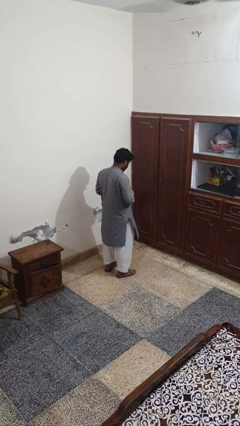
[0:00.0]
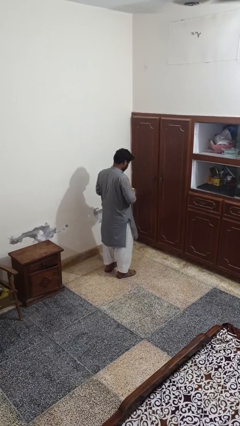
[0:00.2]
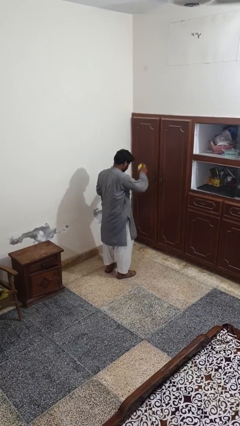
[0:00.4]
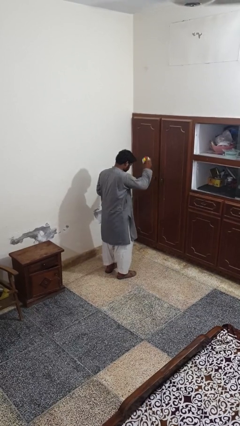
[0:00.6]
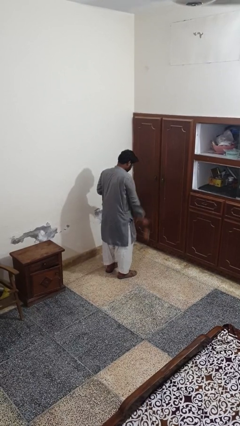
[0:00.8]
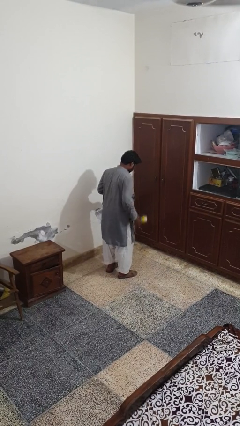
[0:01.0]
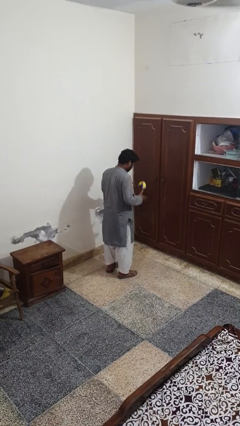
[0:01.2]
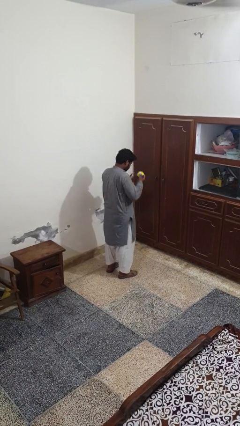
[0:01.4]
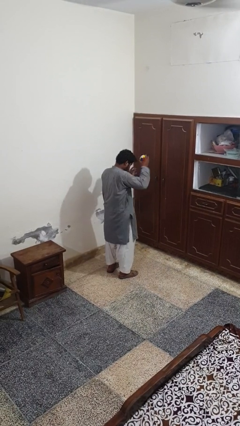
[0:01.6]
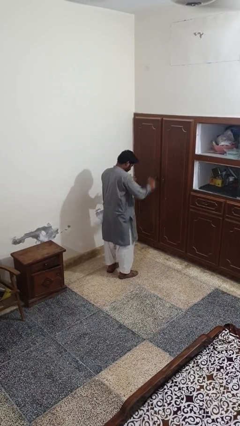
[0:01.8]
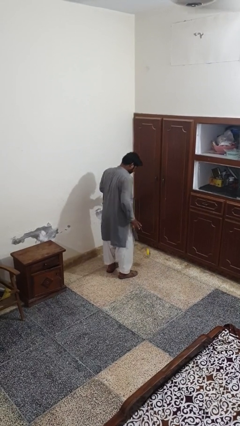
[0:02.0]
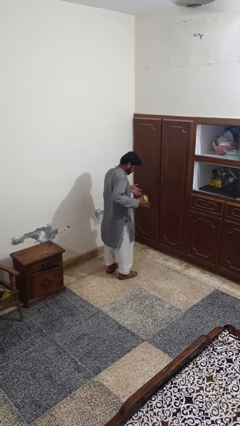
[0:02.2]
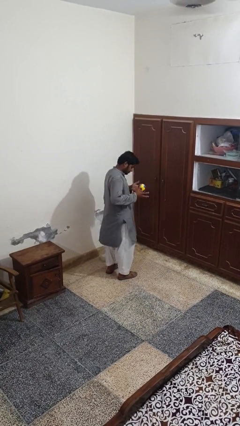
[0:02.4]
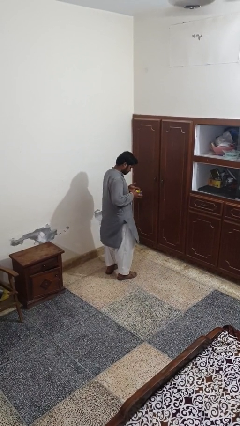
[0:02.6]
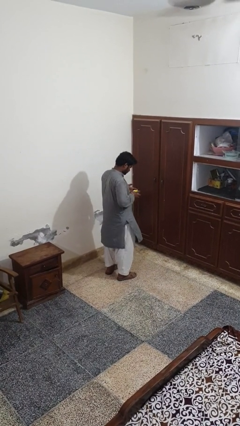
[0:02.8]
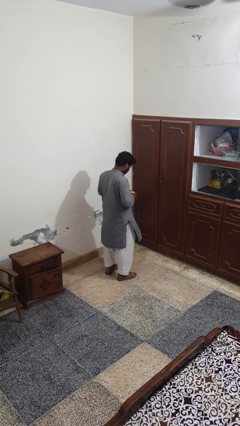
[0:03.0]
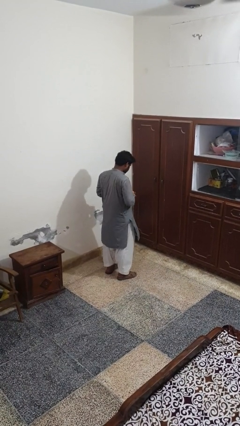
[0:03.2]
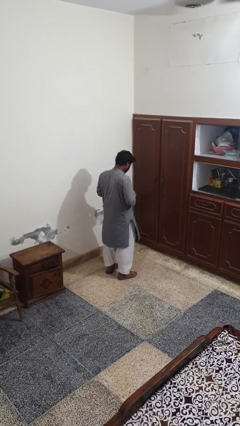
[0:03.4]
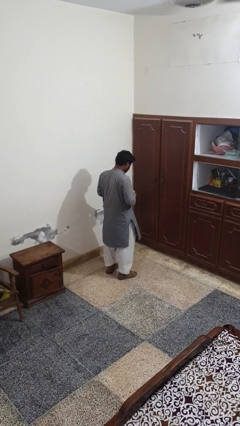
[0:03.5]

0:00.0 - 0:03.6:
person bounces ball on floor

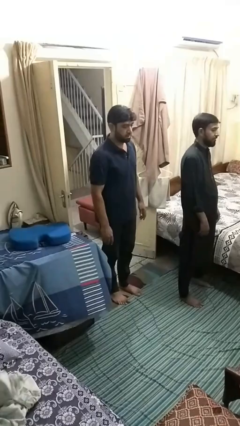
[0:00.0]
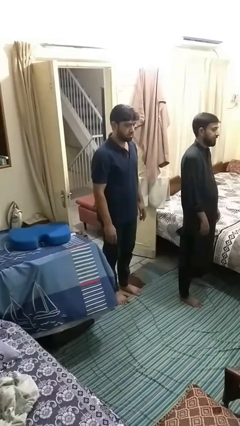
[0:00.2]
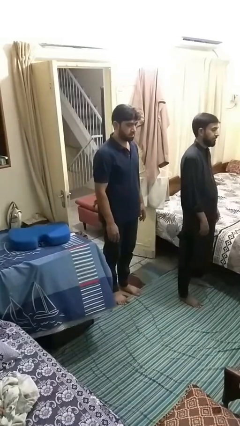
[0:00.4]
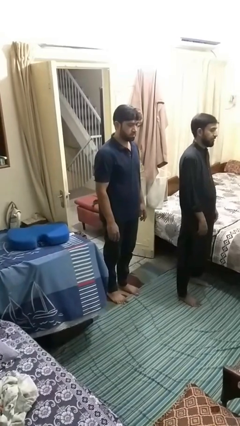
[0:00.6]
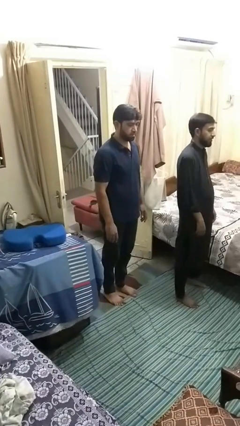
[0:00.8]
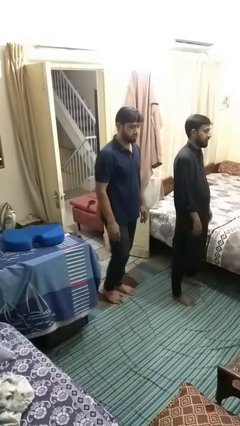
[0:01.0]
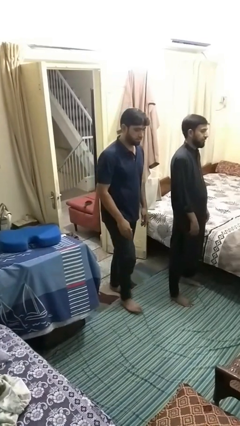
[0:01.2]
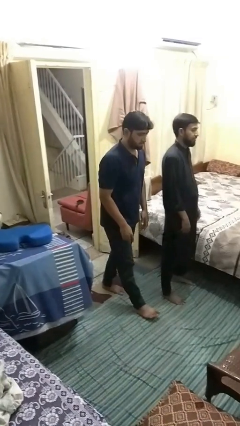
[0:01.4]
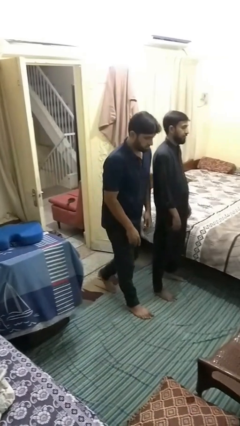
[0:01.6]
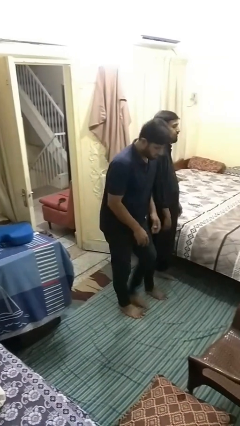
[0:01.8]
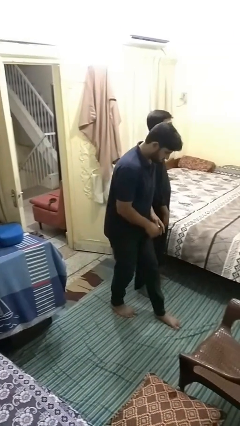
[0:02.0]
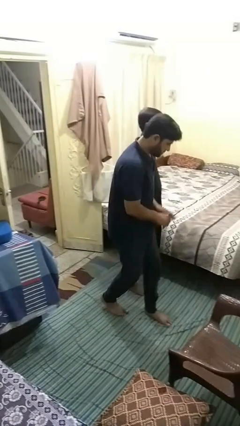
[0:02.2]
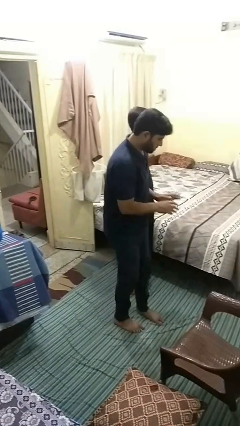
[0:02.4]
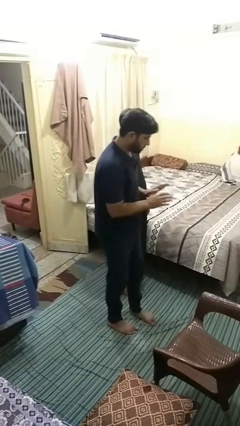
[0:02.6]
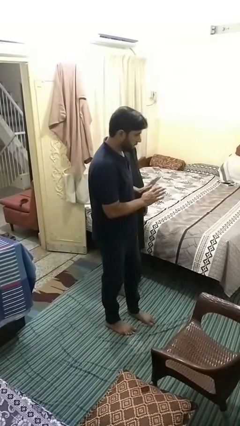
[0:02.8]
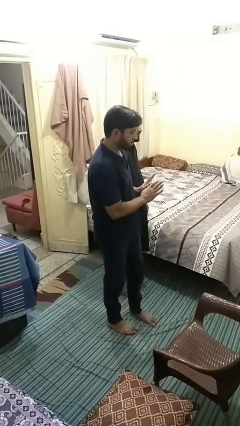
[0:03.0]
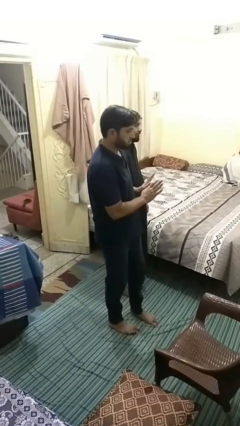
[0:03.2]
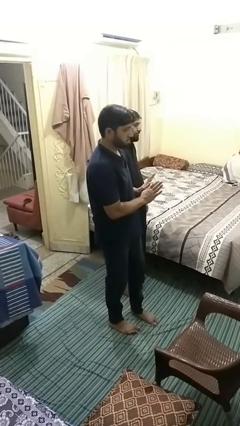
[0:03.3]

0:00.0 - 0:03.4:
person bumps into person

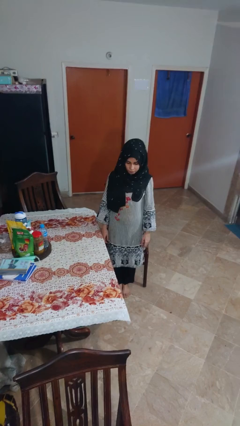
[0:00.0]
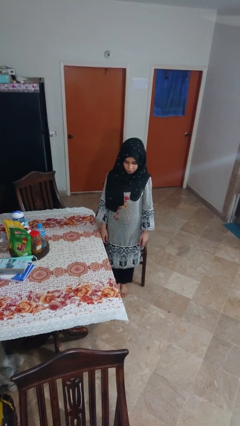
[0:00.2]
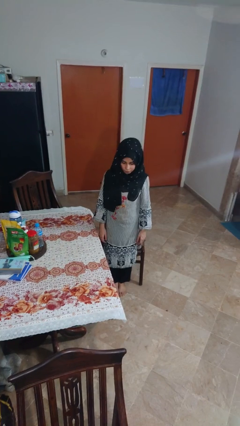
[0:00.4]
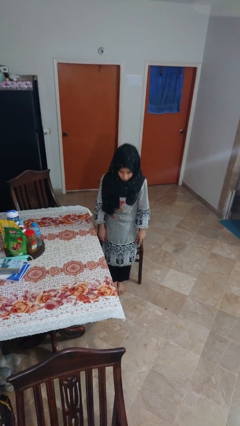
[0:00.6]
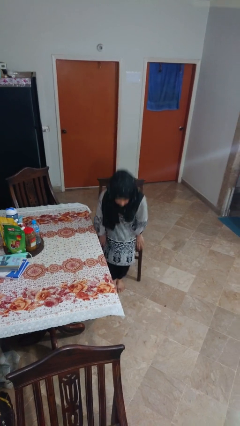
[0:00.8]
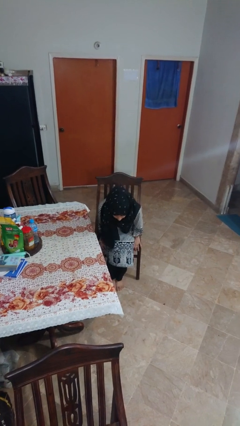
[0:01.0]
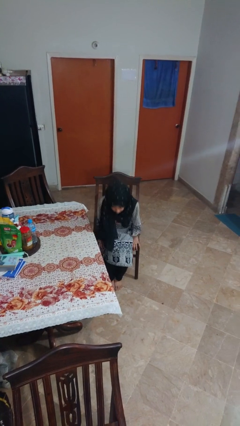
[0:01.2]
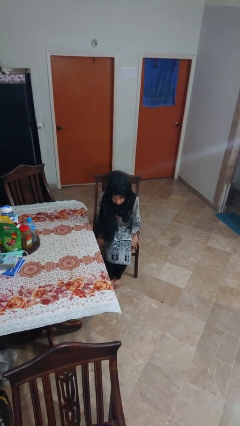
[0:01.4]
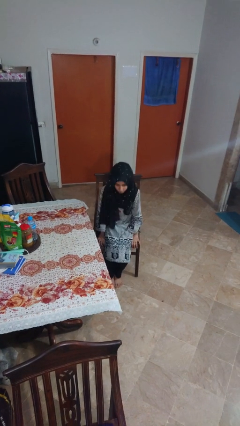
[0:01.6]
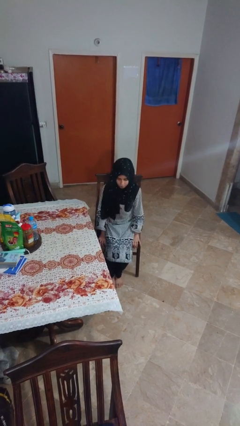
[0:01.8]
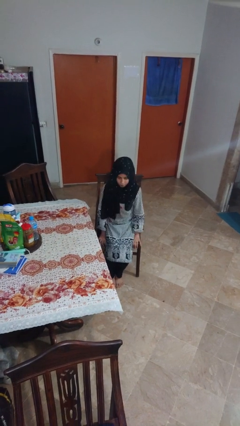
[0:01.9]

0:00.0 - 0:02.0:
person sits down

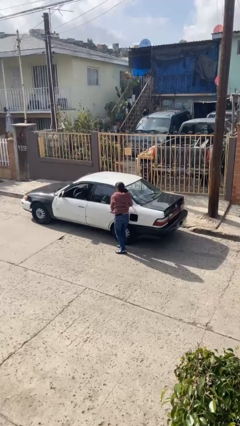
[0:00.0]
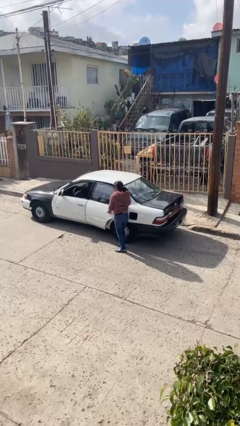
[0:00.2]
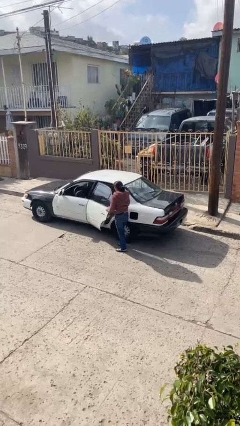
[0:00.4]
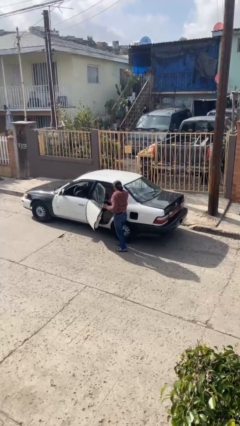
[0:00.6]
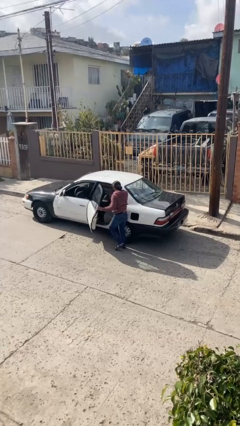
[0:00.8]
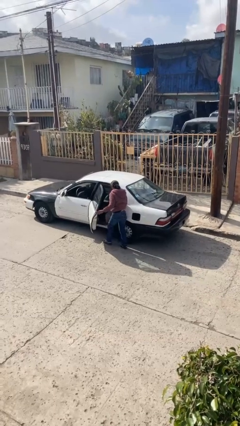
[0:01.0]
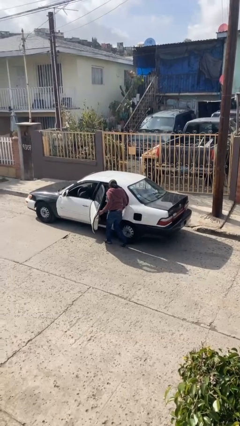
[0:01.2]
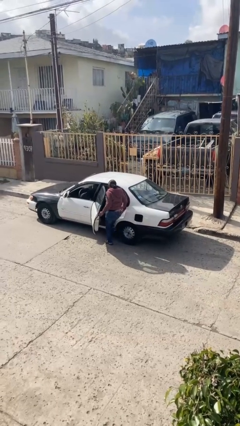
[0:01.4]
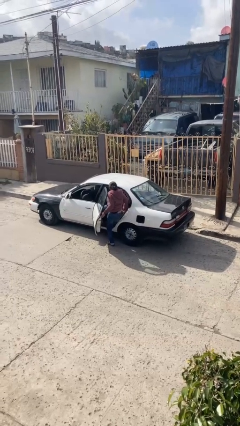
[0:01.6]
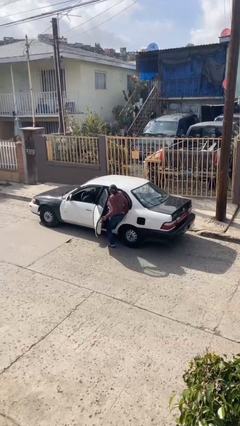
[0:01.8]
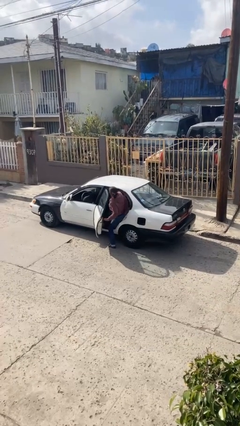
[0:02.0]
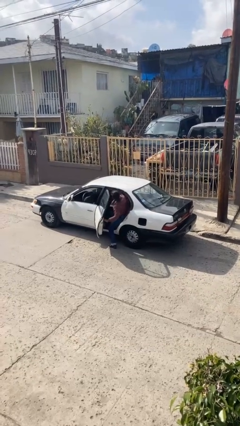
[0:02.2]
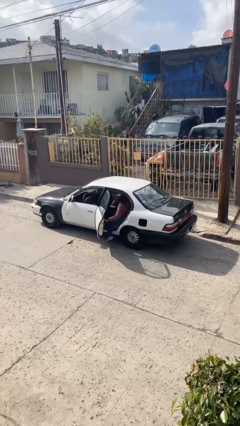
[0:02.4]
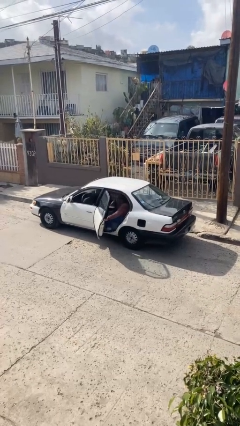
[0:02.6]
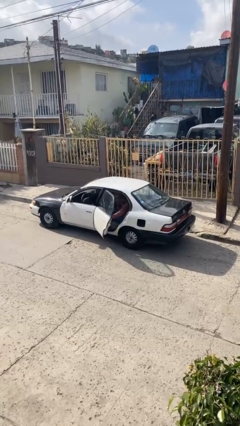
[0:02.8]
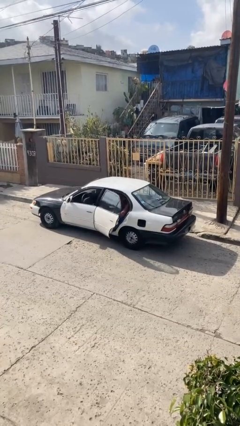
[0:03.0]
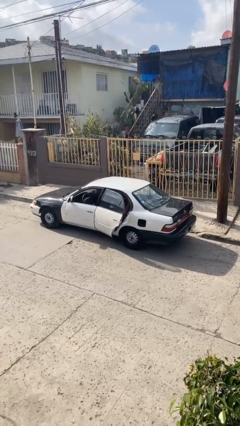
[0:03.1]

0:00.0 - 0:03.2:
person enters car

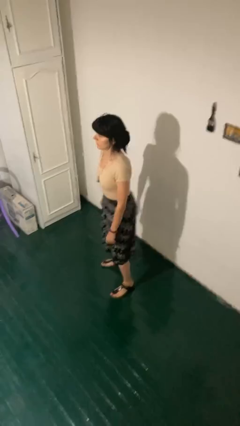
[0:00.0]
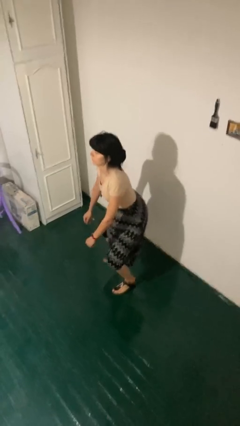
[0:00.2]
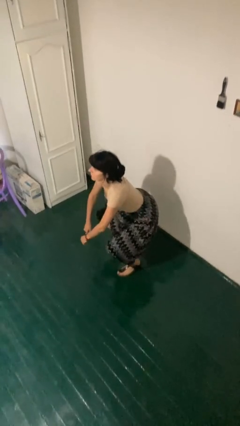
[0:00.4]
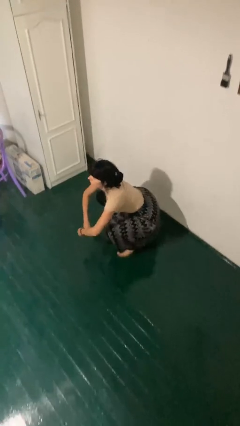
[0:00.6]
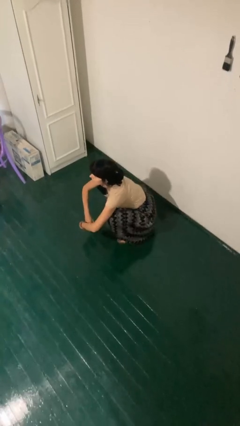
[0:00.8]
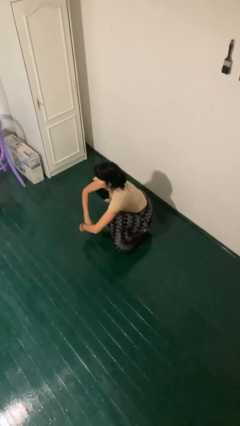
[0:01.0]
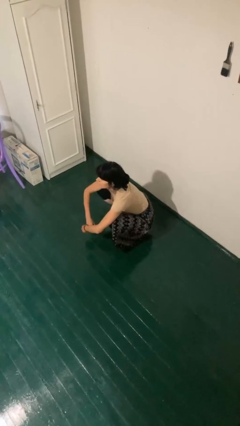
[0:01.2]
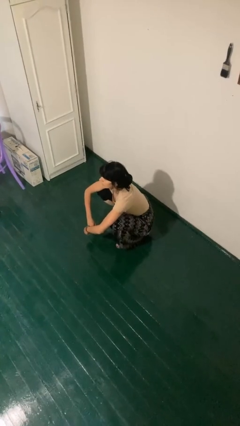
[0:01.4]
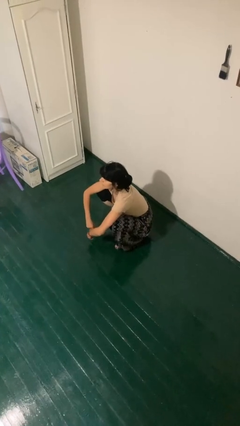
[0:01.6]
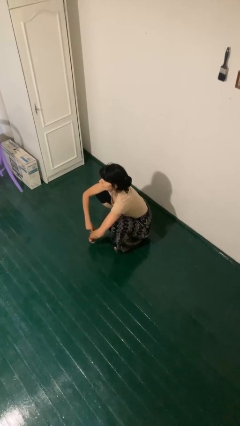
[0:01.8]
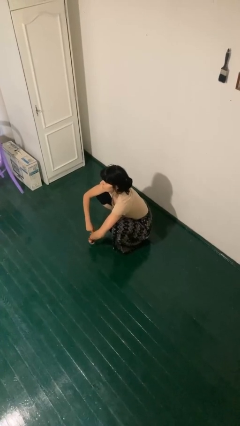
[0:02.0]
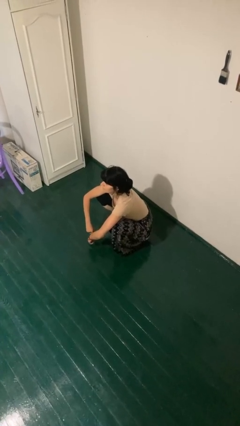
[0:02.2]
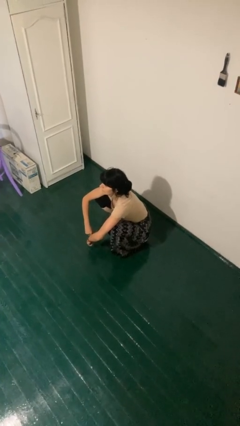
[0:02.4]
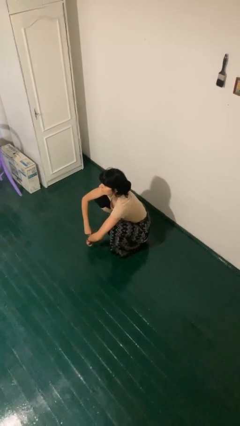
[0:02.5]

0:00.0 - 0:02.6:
person squats

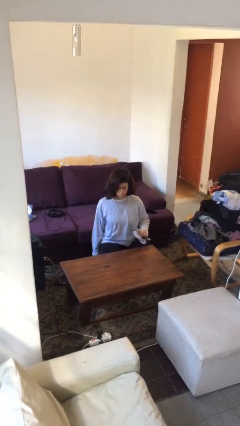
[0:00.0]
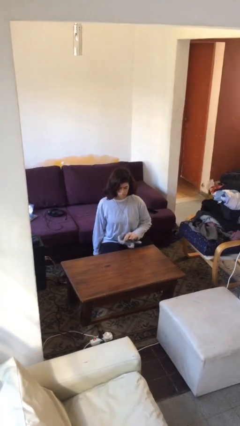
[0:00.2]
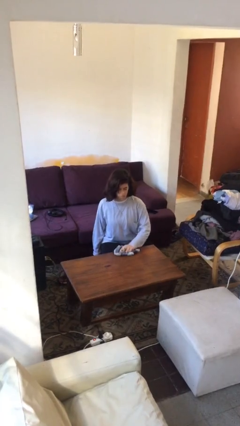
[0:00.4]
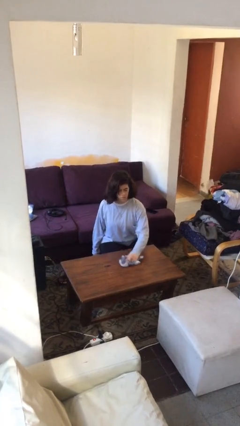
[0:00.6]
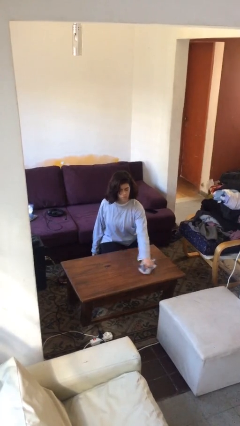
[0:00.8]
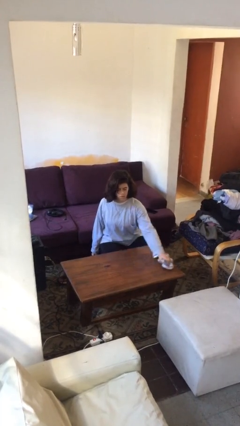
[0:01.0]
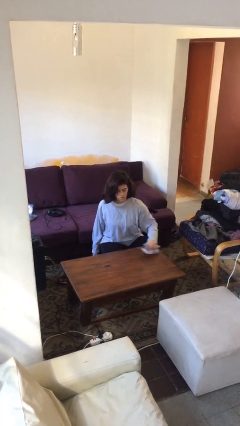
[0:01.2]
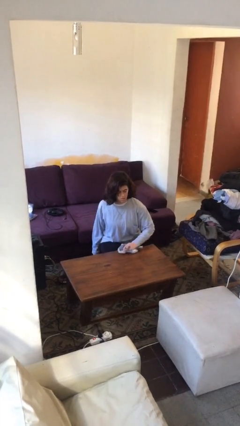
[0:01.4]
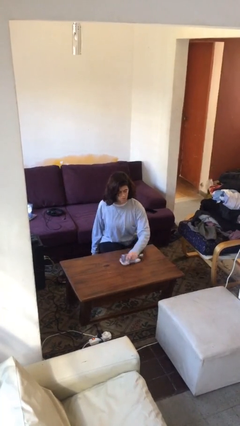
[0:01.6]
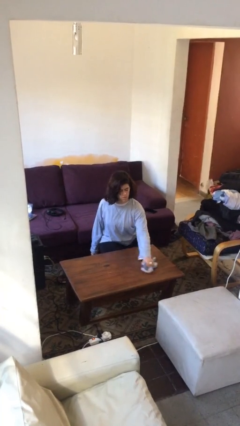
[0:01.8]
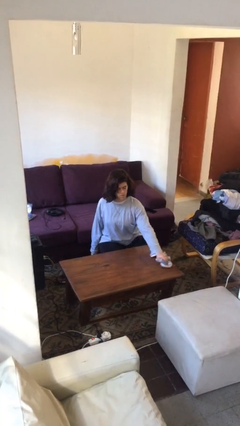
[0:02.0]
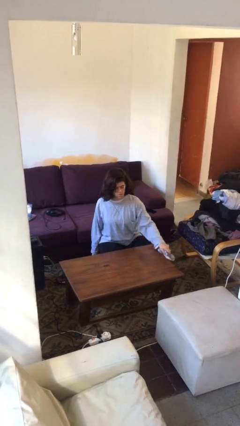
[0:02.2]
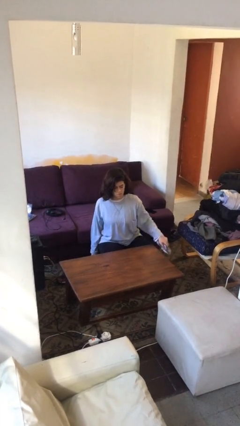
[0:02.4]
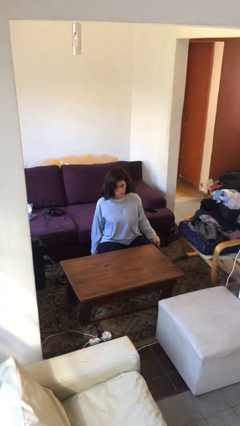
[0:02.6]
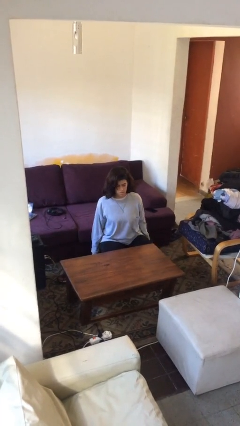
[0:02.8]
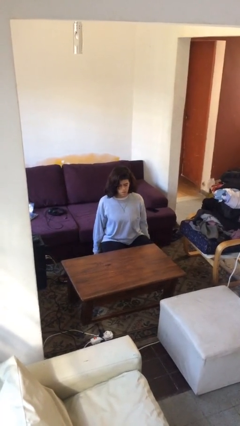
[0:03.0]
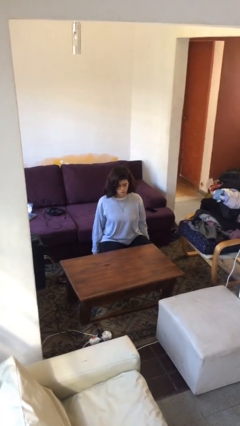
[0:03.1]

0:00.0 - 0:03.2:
person cleans table with rag
